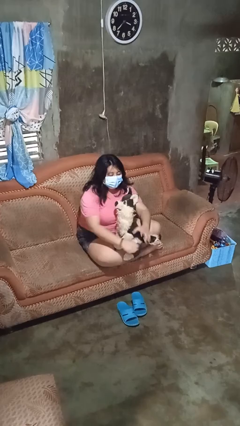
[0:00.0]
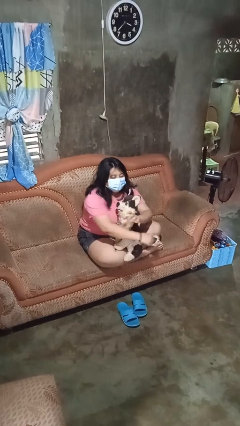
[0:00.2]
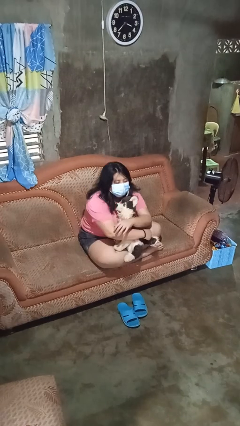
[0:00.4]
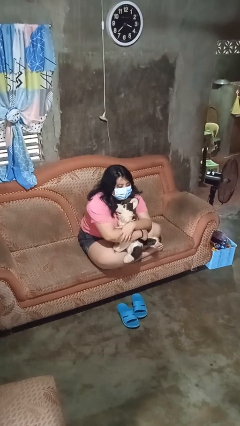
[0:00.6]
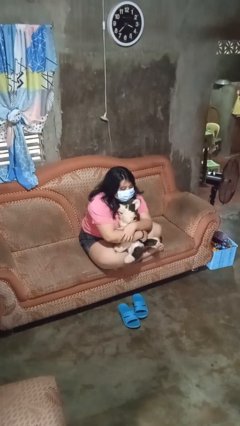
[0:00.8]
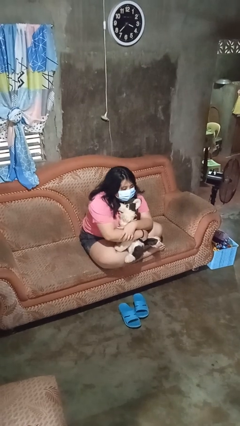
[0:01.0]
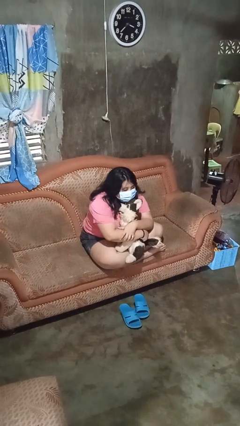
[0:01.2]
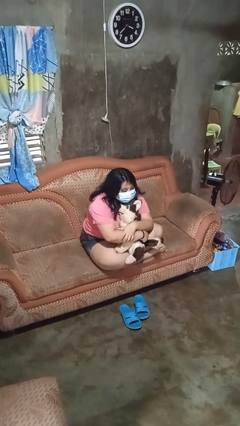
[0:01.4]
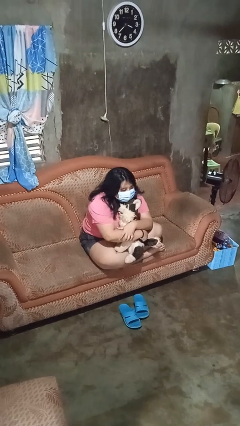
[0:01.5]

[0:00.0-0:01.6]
person hugs stuffed animal

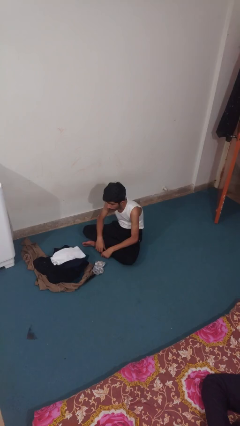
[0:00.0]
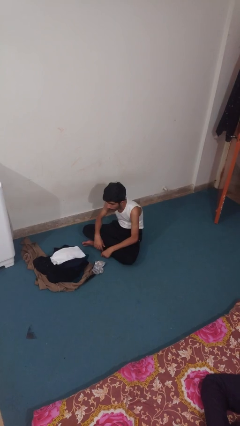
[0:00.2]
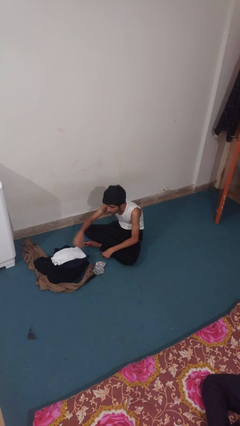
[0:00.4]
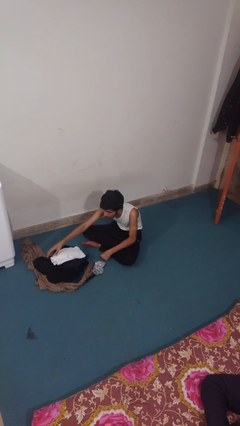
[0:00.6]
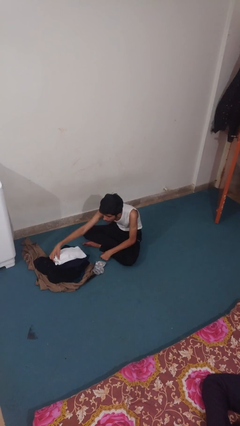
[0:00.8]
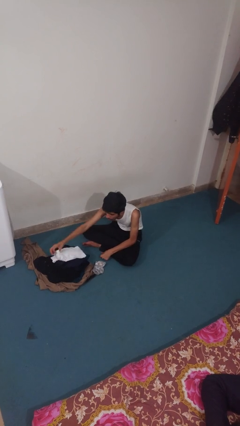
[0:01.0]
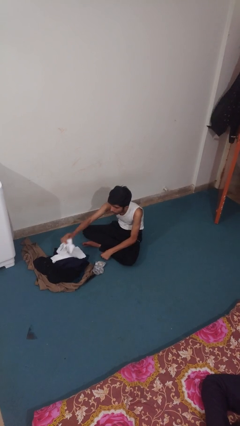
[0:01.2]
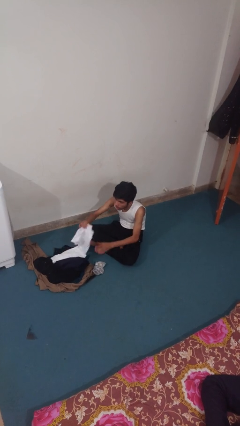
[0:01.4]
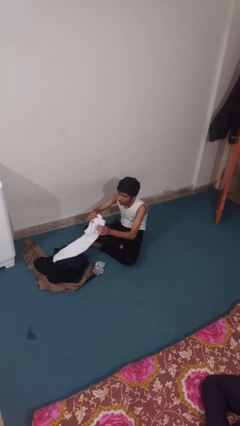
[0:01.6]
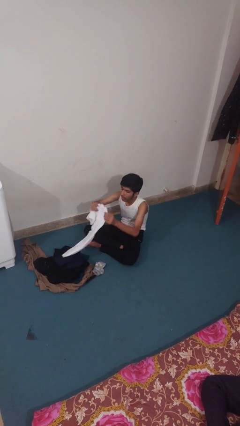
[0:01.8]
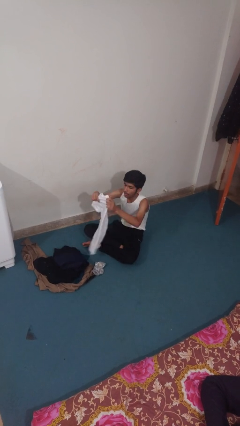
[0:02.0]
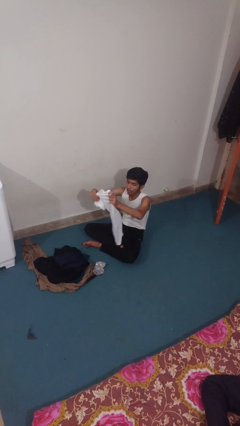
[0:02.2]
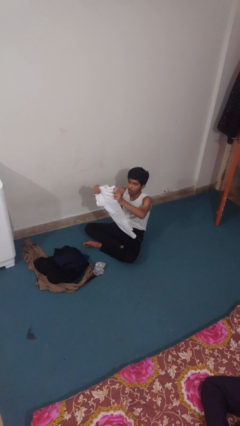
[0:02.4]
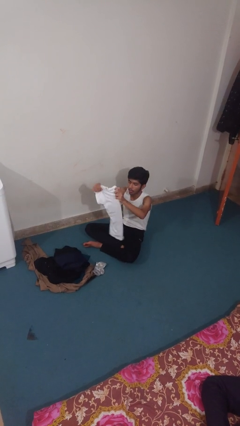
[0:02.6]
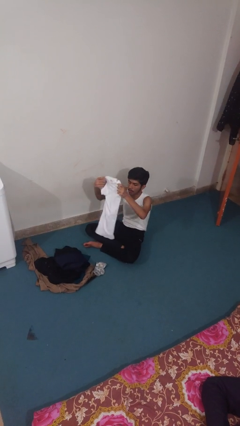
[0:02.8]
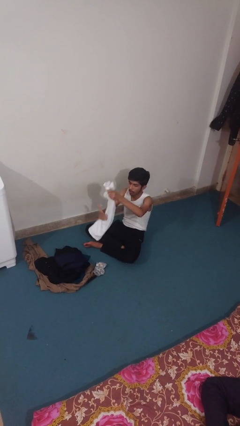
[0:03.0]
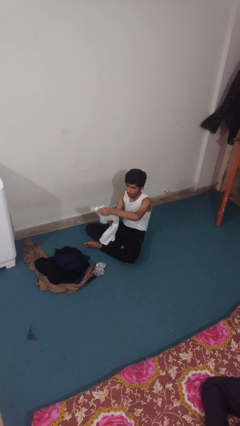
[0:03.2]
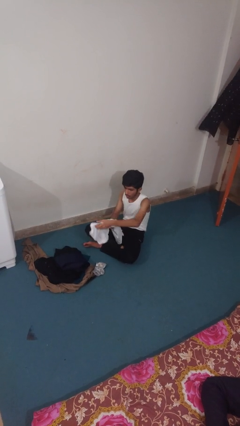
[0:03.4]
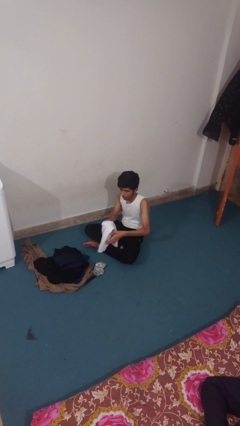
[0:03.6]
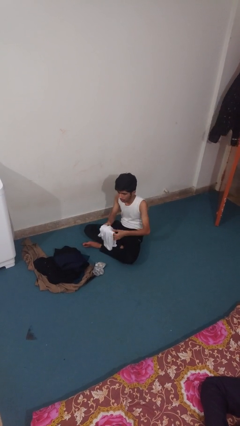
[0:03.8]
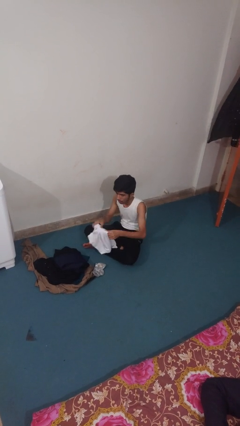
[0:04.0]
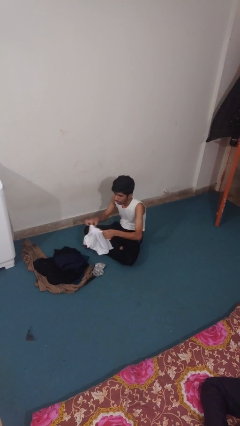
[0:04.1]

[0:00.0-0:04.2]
person folds shirt

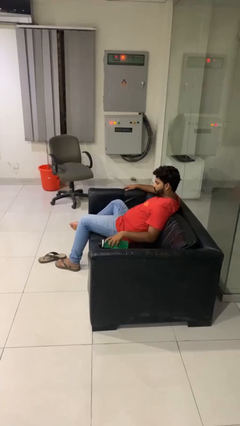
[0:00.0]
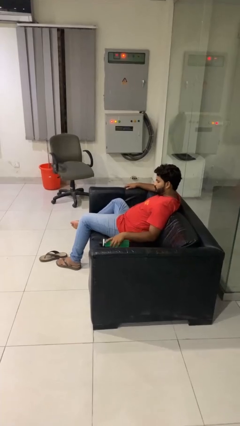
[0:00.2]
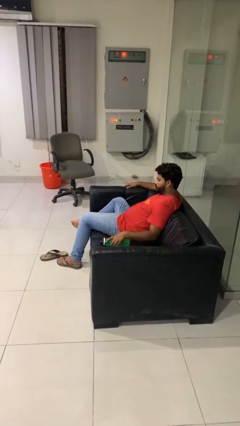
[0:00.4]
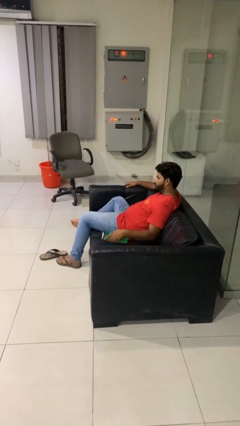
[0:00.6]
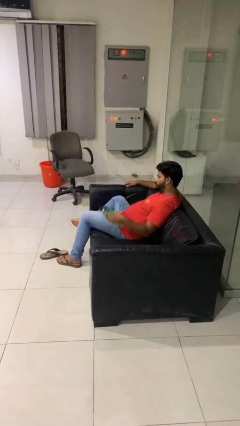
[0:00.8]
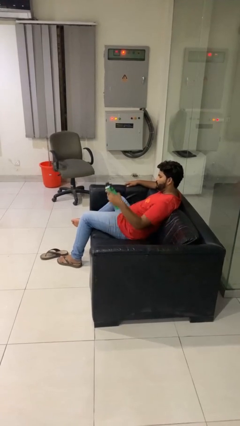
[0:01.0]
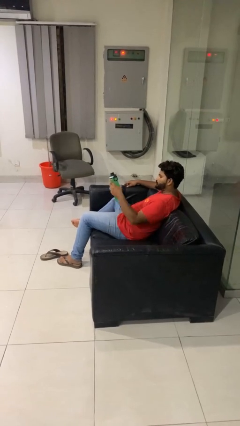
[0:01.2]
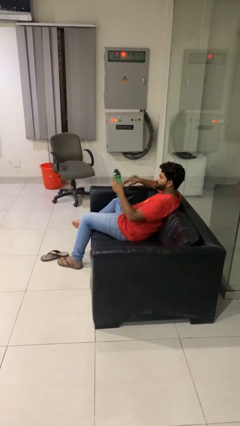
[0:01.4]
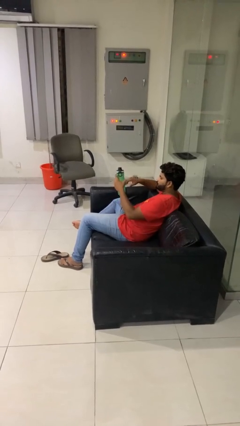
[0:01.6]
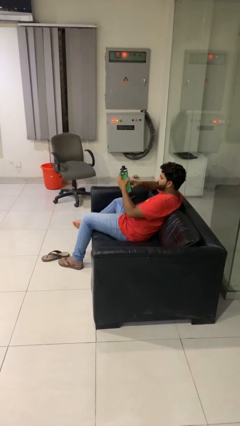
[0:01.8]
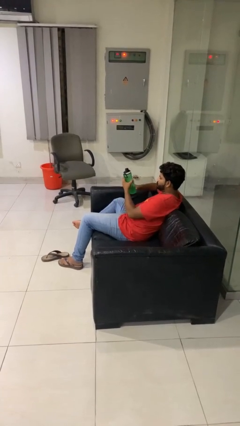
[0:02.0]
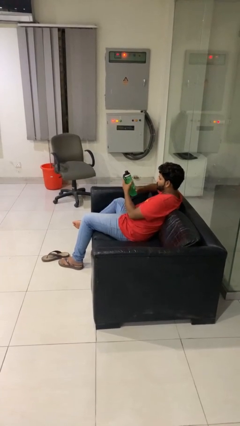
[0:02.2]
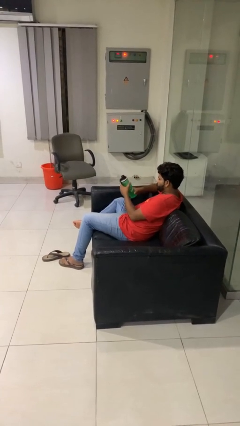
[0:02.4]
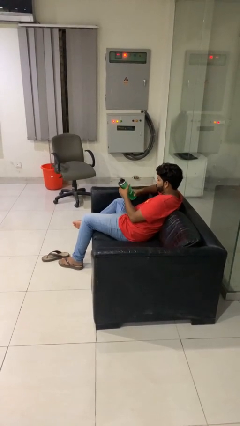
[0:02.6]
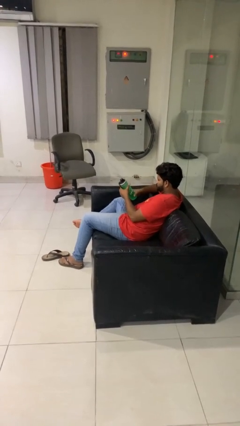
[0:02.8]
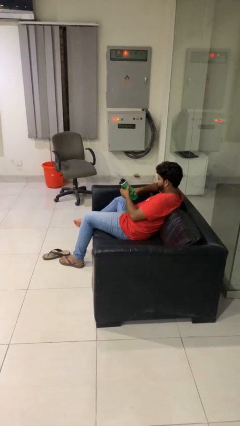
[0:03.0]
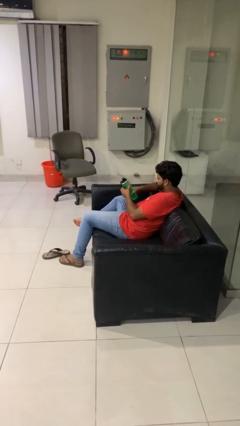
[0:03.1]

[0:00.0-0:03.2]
person picks up object from couch

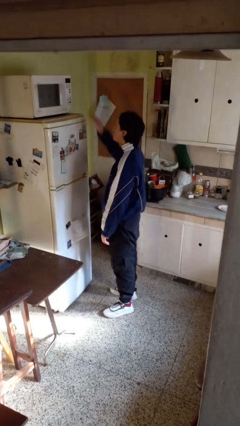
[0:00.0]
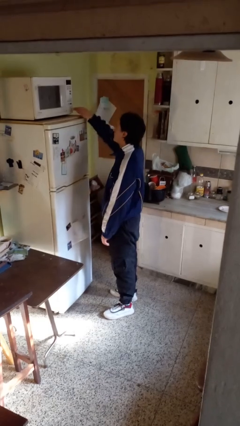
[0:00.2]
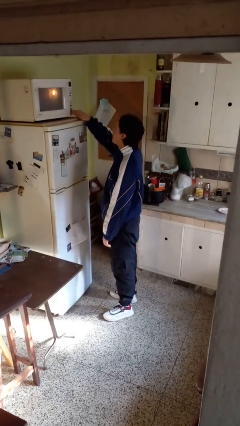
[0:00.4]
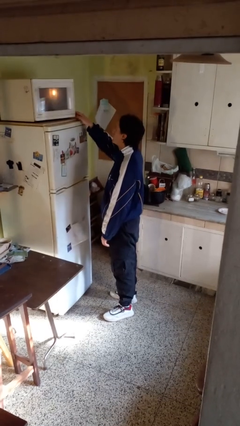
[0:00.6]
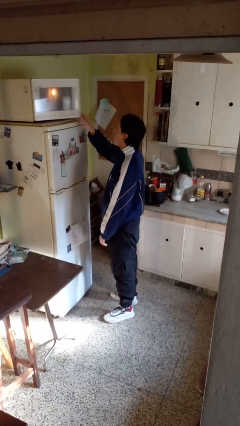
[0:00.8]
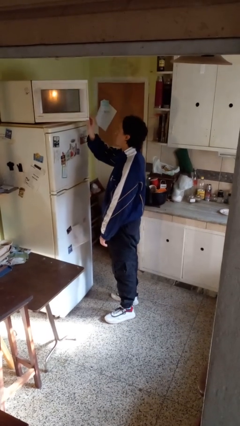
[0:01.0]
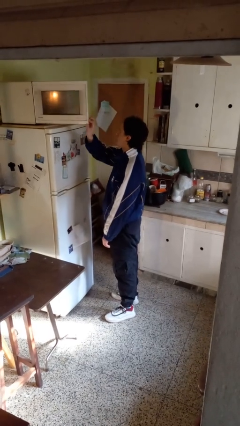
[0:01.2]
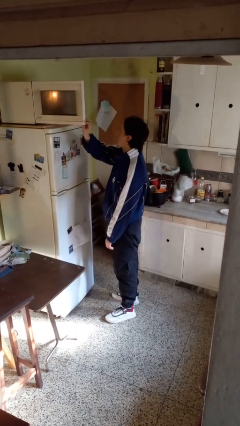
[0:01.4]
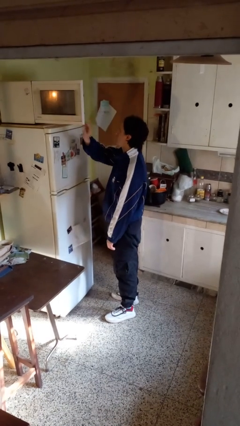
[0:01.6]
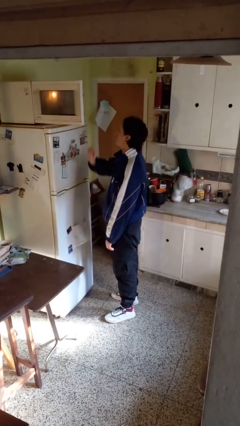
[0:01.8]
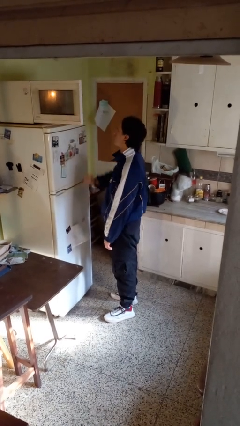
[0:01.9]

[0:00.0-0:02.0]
person opens microwave

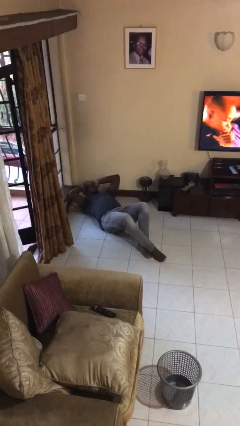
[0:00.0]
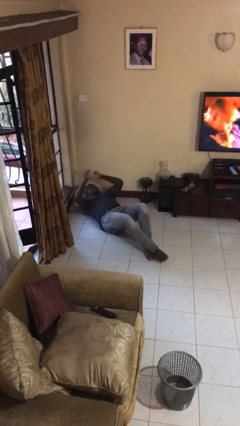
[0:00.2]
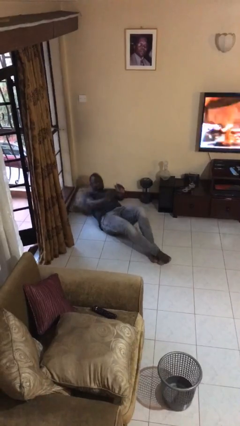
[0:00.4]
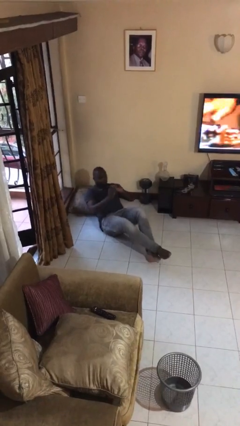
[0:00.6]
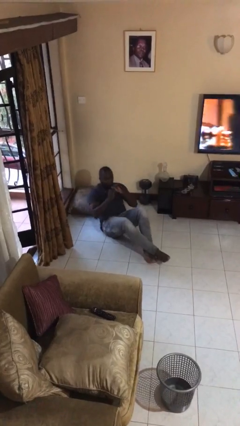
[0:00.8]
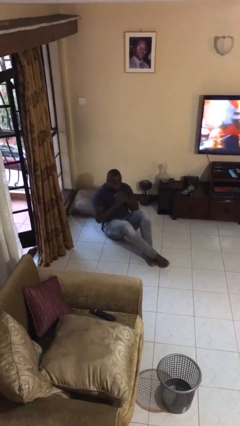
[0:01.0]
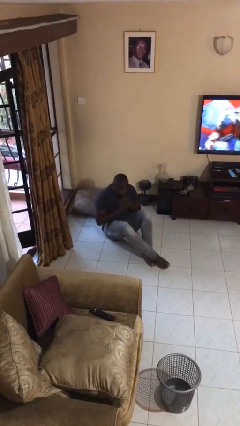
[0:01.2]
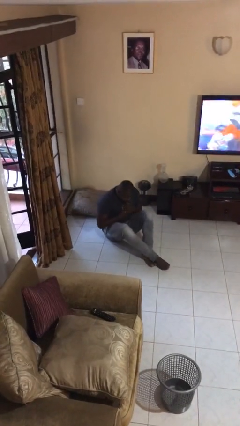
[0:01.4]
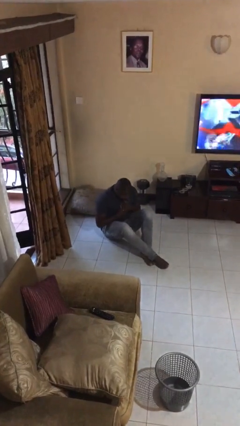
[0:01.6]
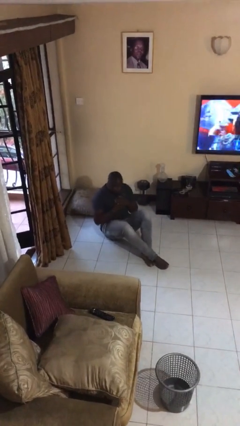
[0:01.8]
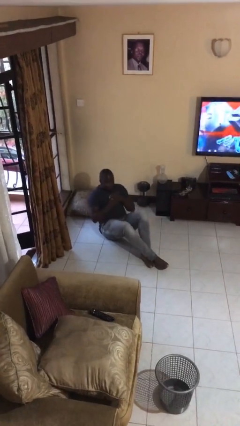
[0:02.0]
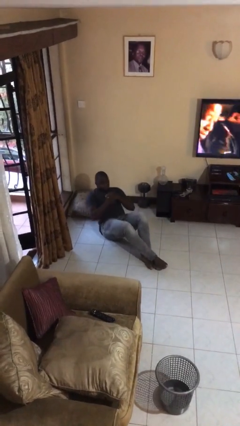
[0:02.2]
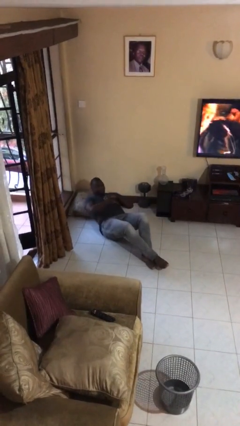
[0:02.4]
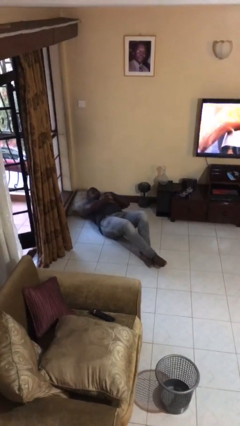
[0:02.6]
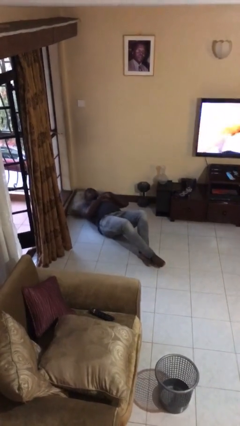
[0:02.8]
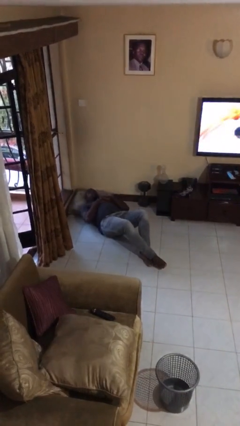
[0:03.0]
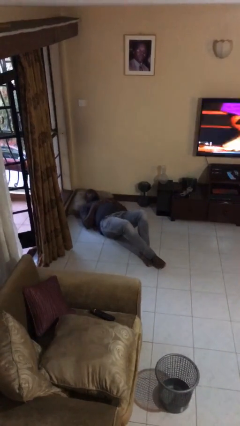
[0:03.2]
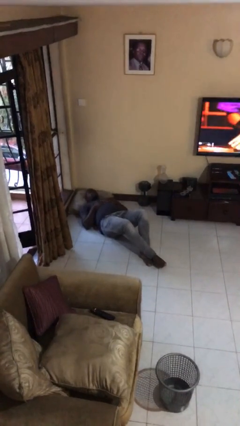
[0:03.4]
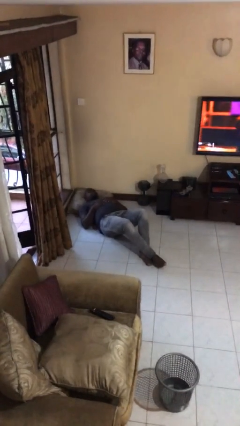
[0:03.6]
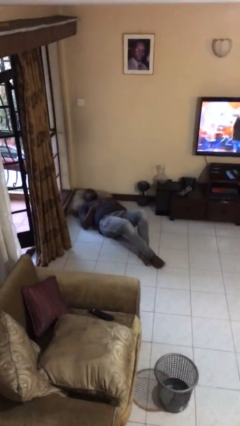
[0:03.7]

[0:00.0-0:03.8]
person exercises with situp

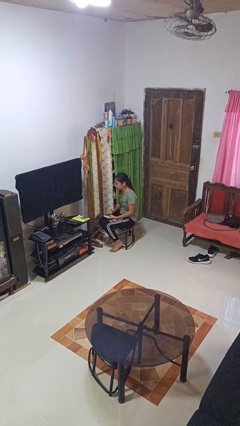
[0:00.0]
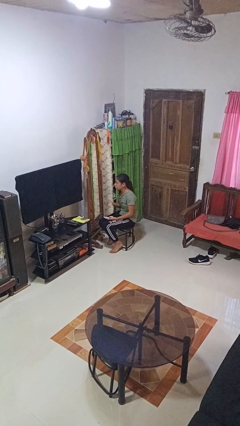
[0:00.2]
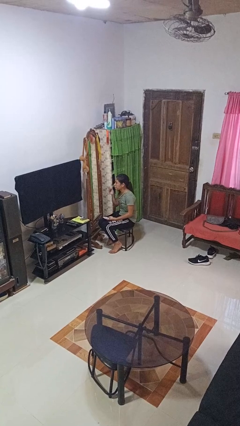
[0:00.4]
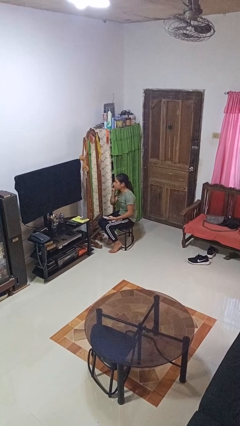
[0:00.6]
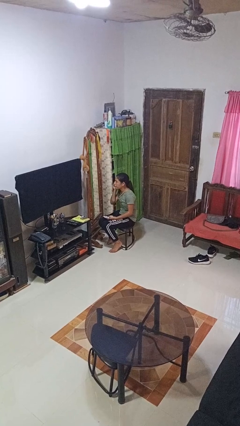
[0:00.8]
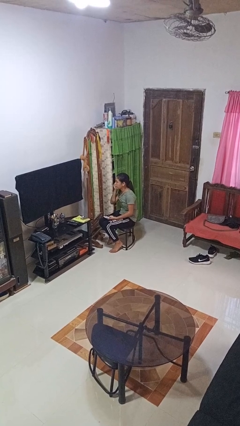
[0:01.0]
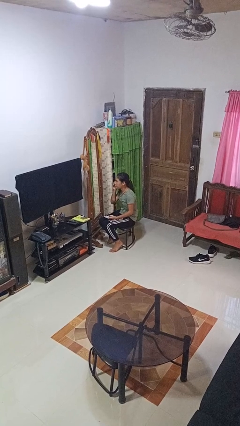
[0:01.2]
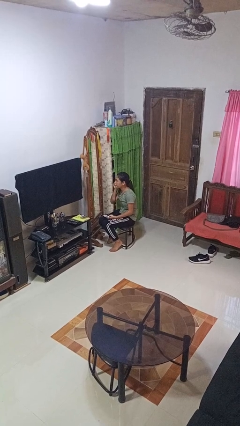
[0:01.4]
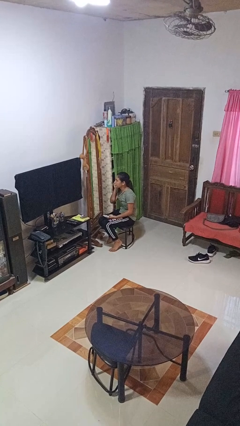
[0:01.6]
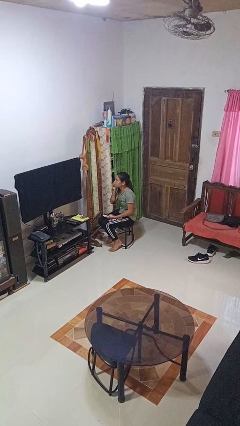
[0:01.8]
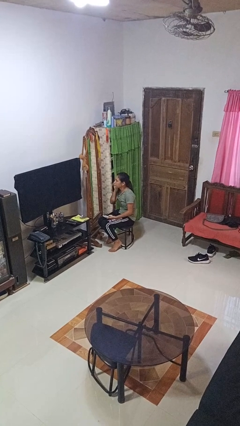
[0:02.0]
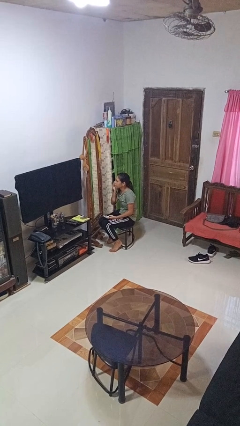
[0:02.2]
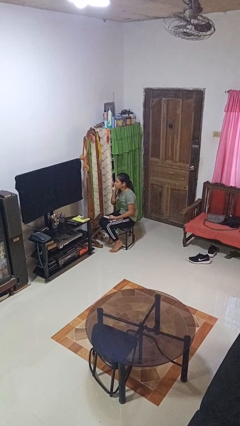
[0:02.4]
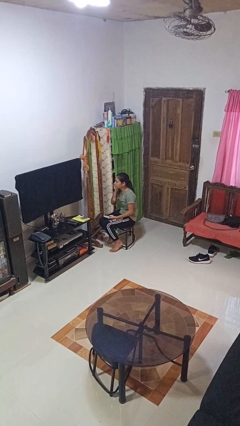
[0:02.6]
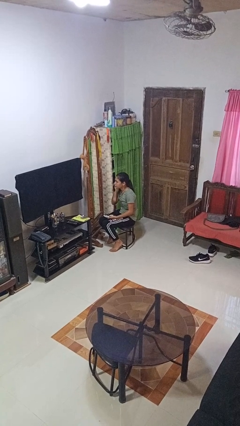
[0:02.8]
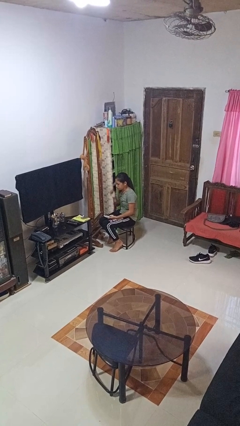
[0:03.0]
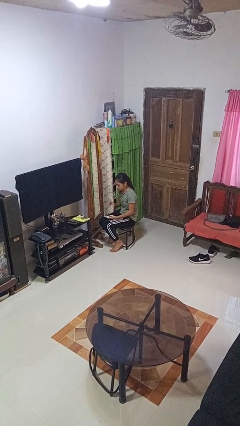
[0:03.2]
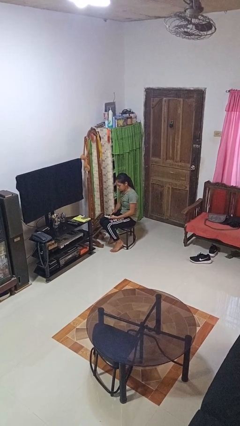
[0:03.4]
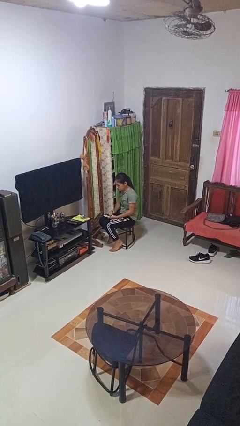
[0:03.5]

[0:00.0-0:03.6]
person applies foundation makeup
